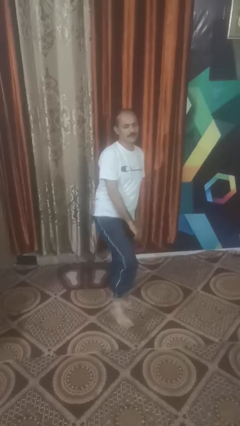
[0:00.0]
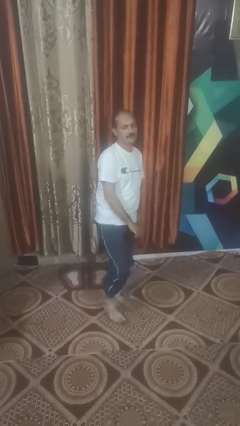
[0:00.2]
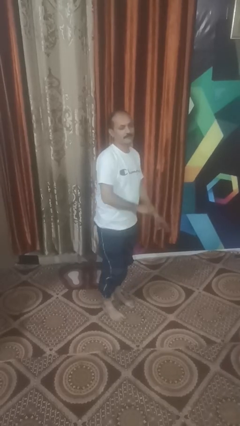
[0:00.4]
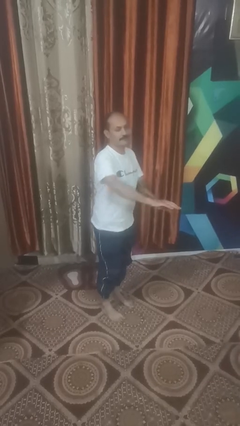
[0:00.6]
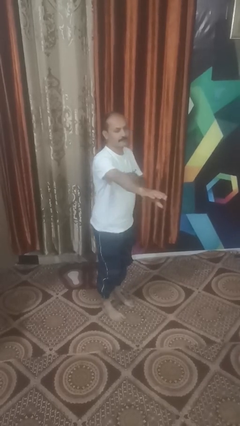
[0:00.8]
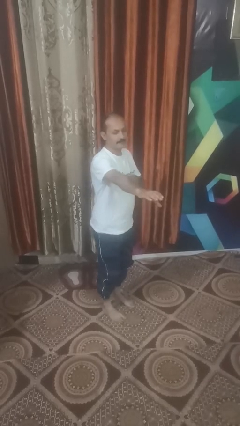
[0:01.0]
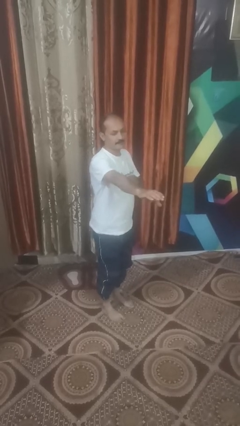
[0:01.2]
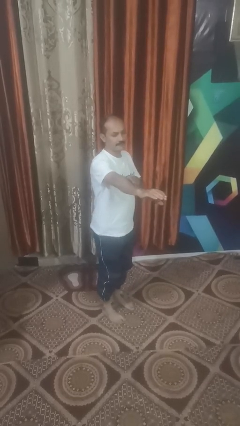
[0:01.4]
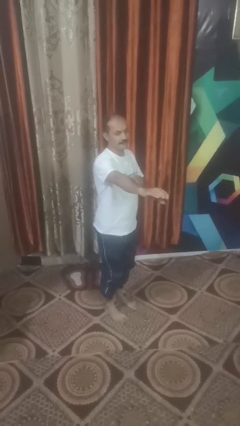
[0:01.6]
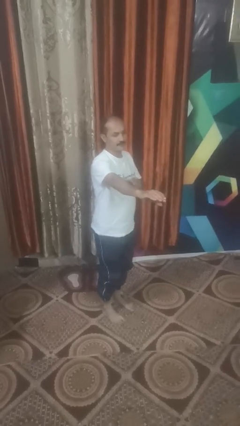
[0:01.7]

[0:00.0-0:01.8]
person karate chop

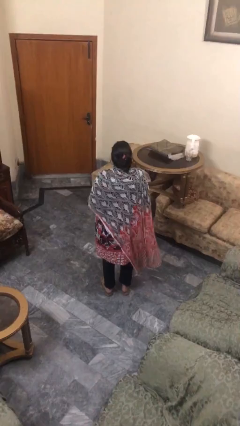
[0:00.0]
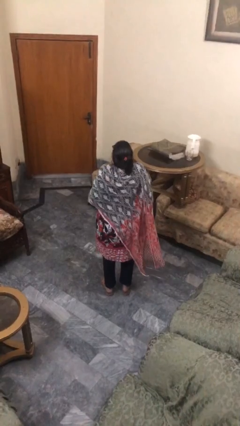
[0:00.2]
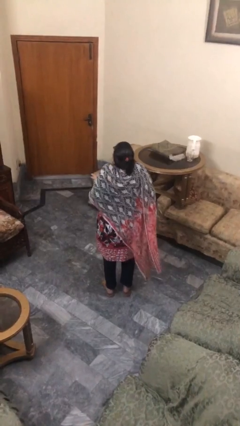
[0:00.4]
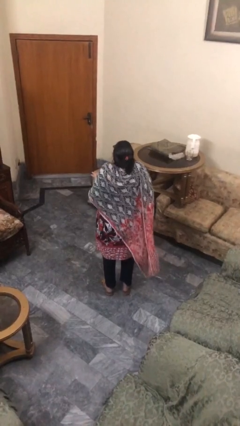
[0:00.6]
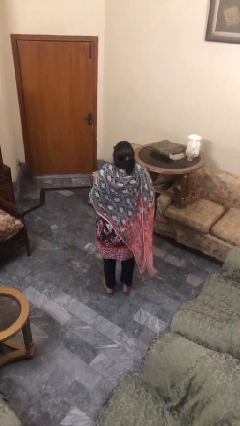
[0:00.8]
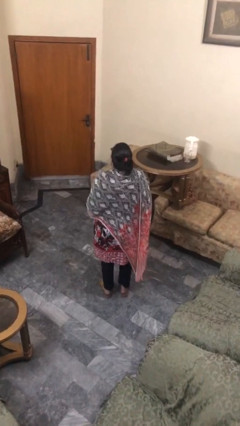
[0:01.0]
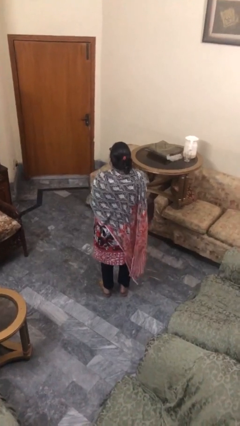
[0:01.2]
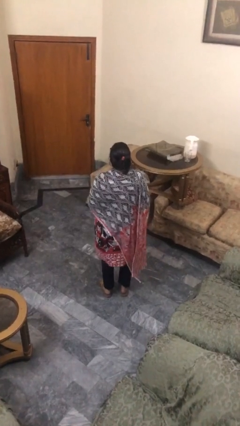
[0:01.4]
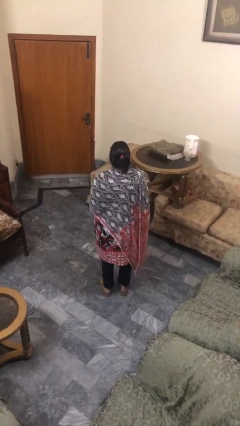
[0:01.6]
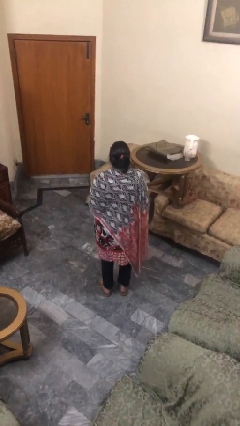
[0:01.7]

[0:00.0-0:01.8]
person shrugs

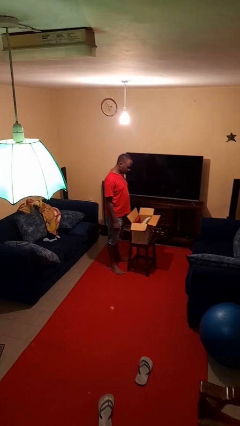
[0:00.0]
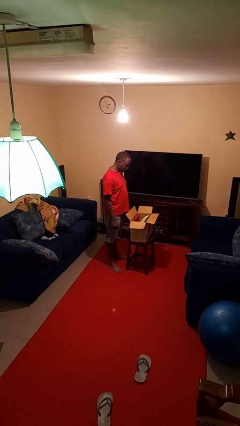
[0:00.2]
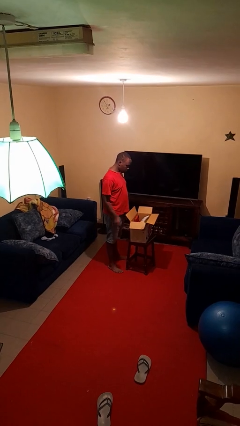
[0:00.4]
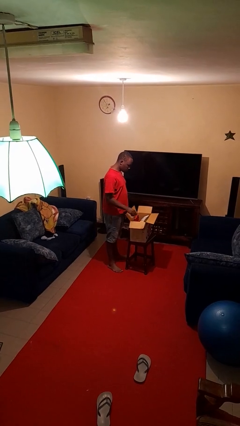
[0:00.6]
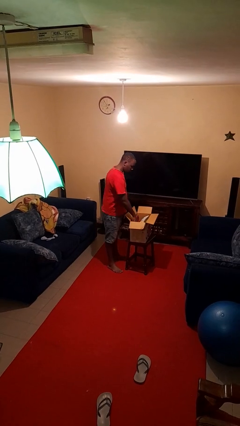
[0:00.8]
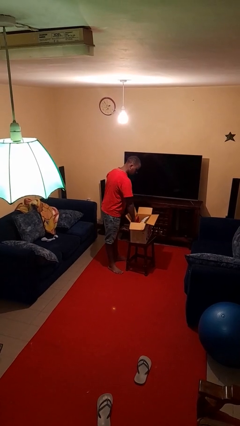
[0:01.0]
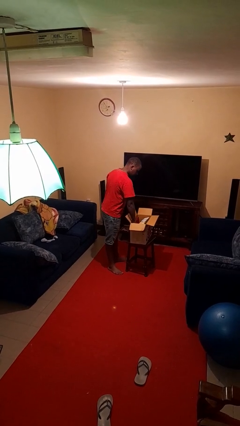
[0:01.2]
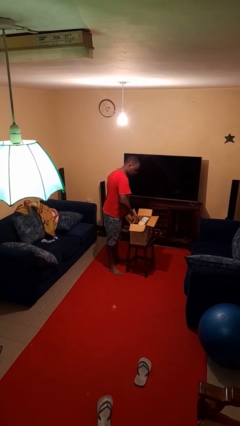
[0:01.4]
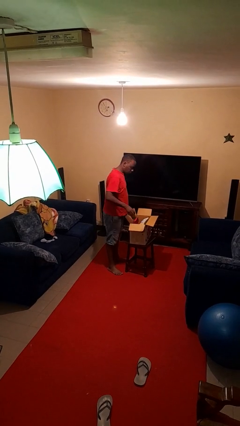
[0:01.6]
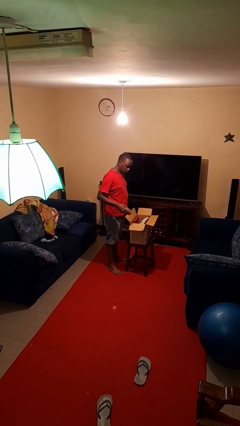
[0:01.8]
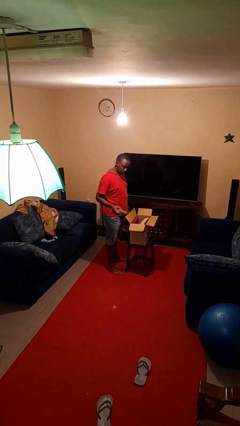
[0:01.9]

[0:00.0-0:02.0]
person takes object from box

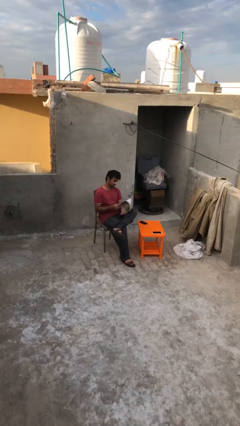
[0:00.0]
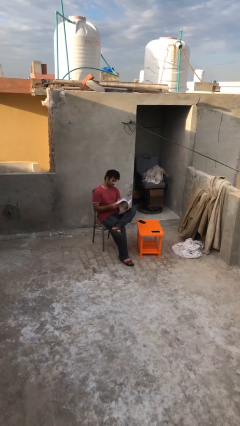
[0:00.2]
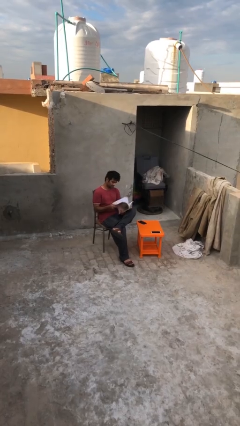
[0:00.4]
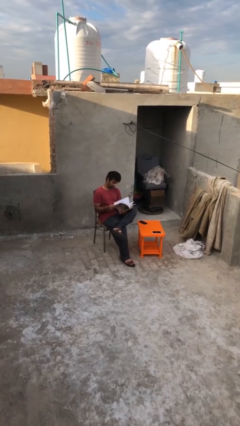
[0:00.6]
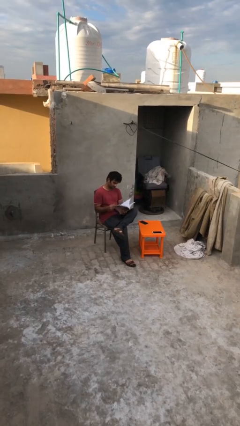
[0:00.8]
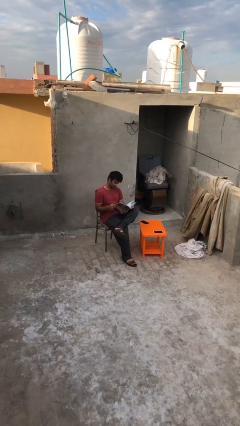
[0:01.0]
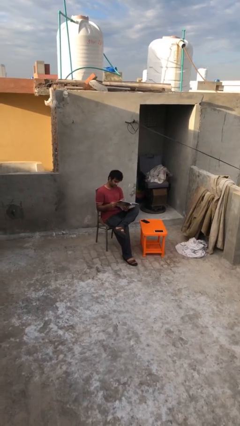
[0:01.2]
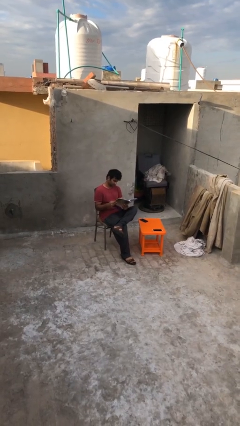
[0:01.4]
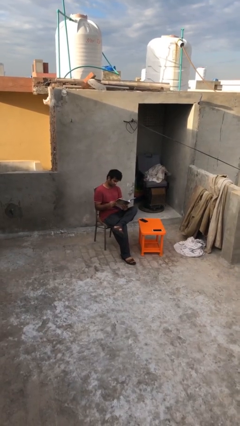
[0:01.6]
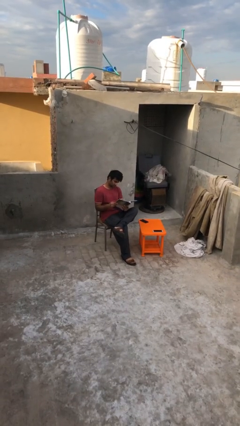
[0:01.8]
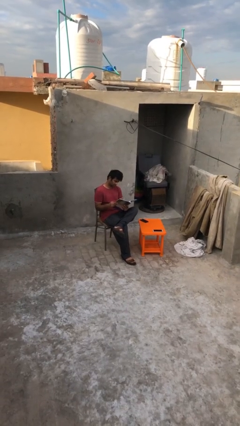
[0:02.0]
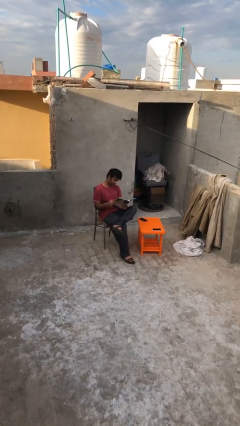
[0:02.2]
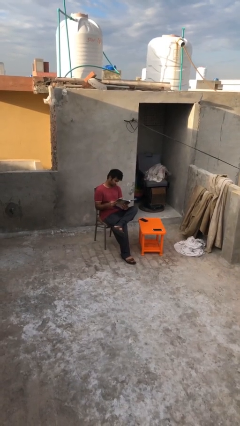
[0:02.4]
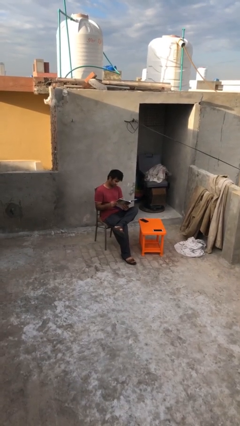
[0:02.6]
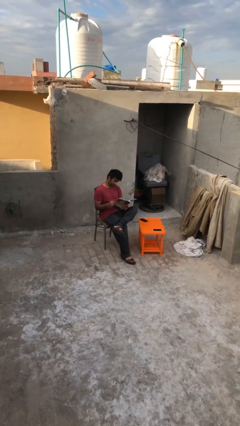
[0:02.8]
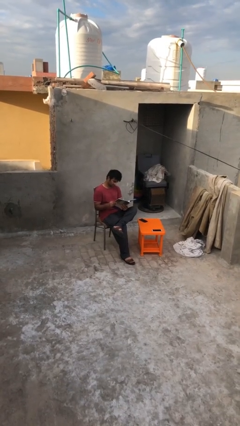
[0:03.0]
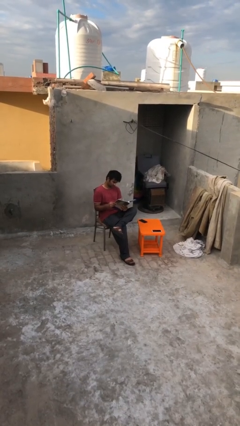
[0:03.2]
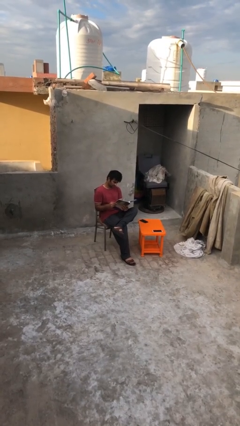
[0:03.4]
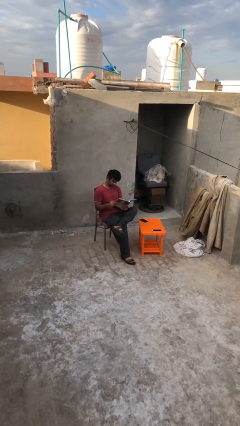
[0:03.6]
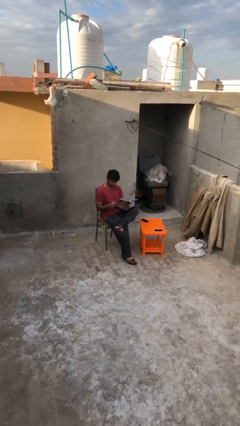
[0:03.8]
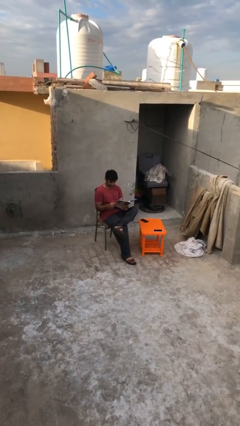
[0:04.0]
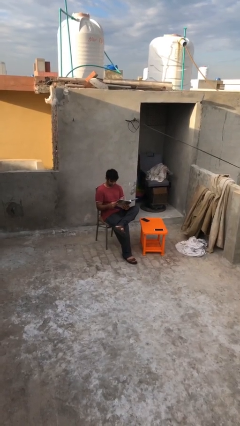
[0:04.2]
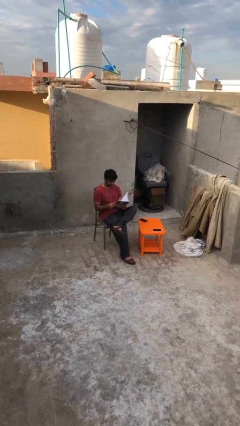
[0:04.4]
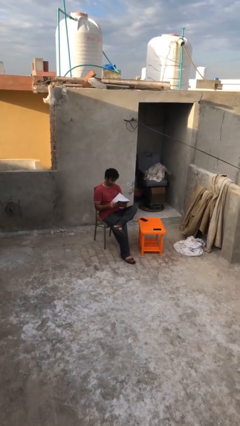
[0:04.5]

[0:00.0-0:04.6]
person reads document

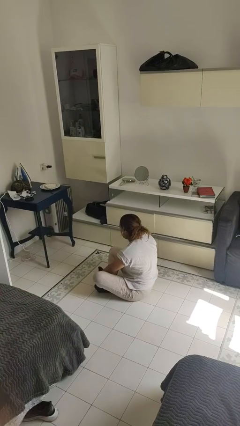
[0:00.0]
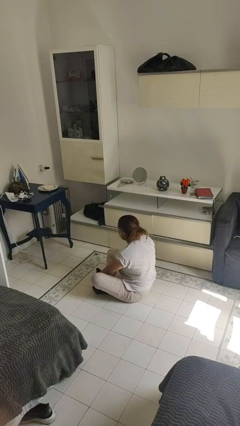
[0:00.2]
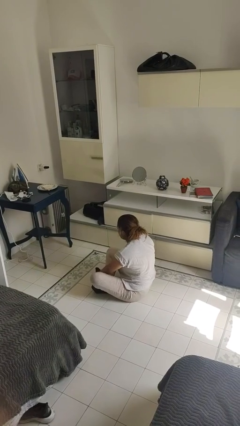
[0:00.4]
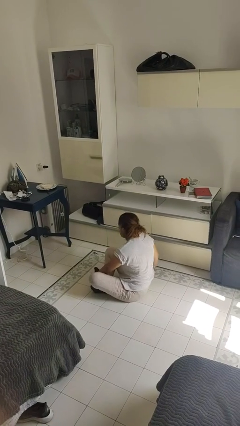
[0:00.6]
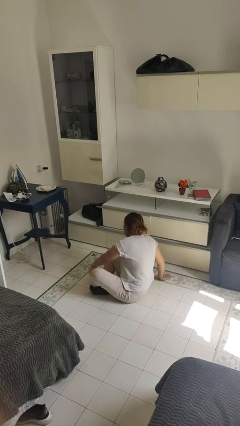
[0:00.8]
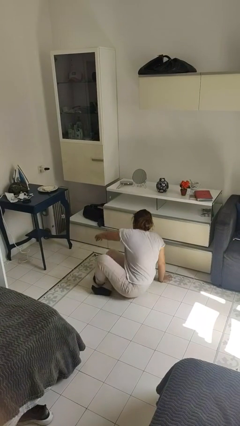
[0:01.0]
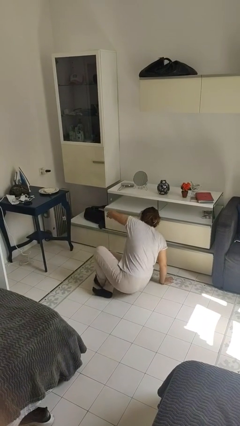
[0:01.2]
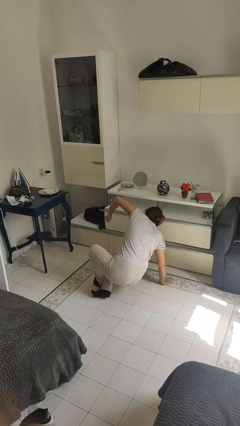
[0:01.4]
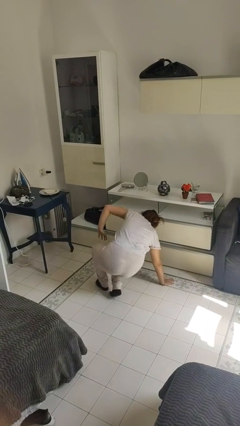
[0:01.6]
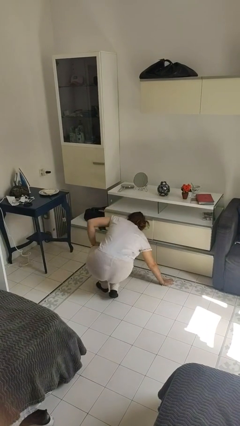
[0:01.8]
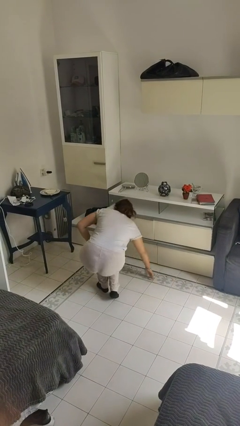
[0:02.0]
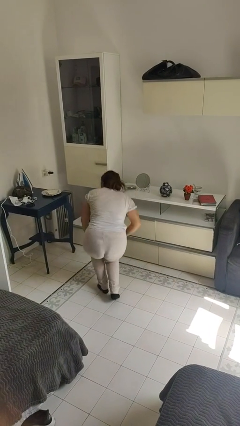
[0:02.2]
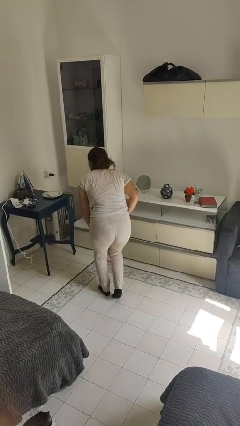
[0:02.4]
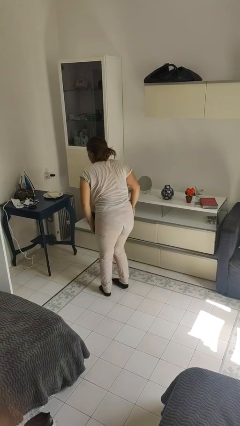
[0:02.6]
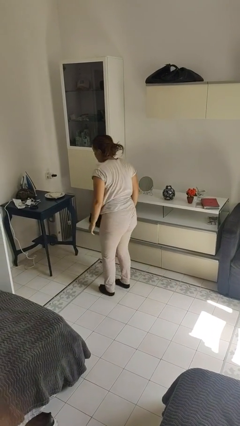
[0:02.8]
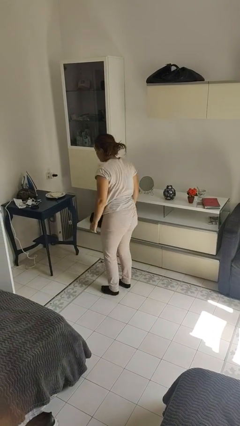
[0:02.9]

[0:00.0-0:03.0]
person stands up from floor

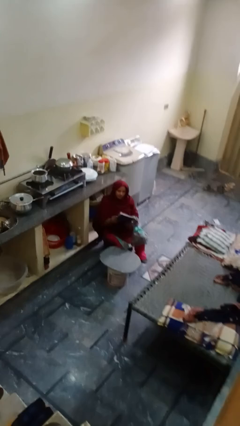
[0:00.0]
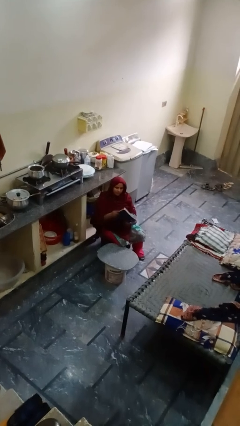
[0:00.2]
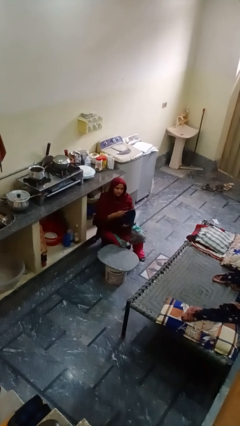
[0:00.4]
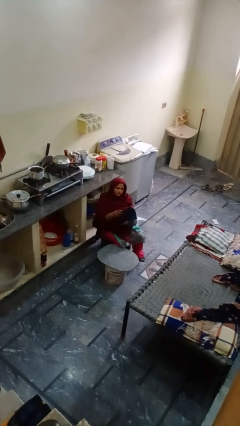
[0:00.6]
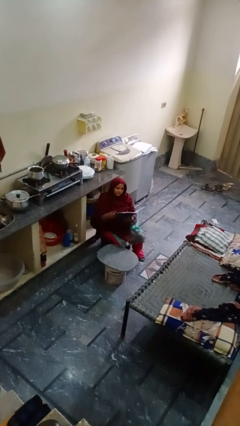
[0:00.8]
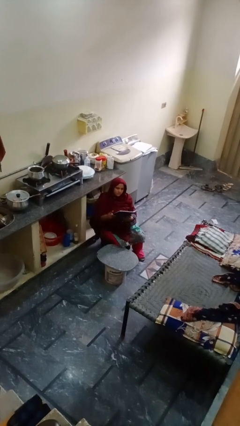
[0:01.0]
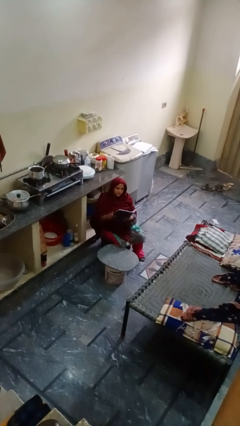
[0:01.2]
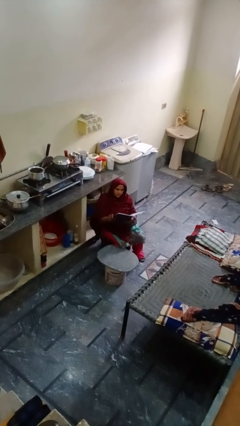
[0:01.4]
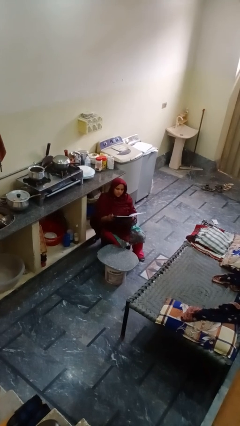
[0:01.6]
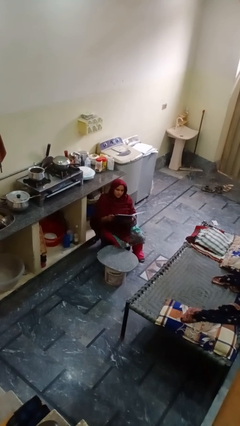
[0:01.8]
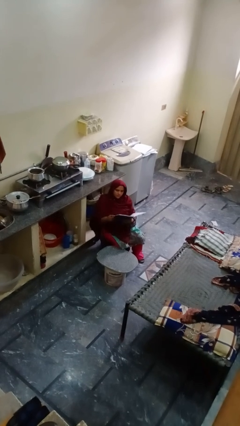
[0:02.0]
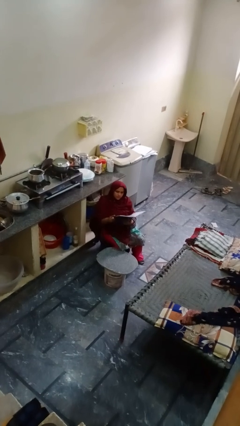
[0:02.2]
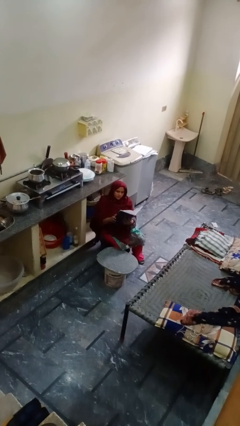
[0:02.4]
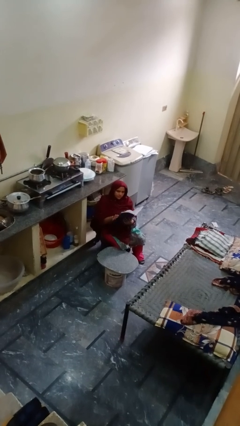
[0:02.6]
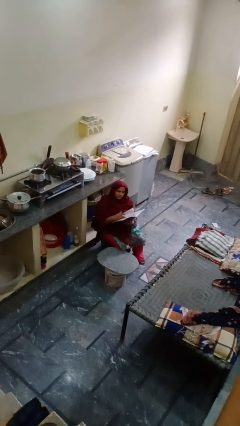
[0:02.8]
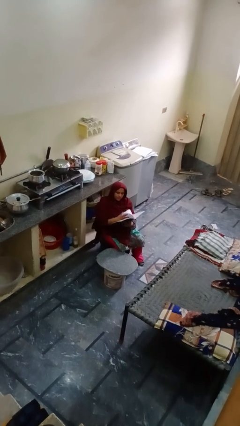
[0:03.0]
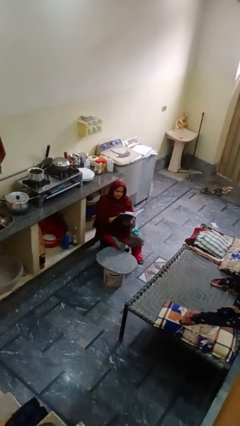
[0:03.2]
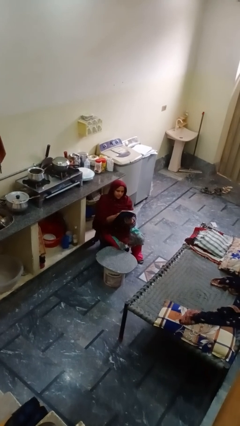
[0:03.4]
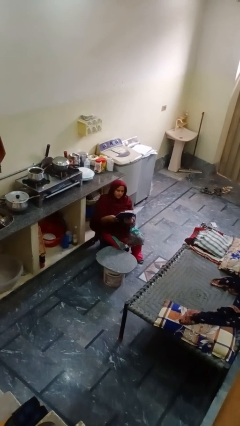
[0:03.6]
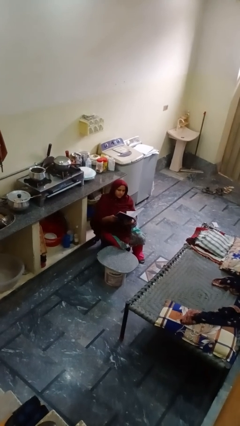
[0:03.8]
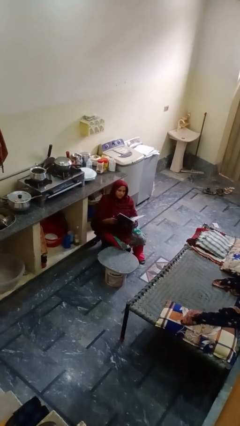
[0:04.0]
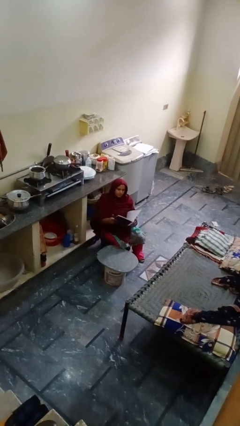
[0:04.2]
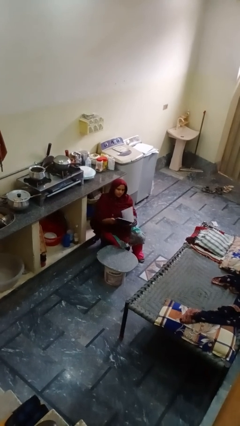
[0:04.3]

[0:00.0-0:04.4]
person reads magazine
